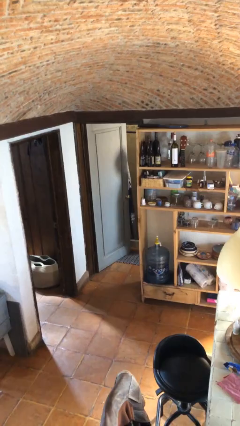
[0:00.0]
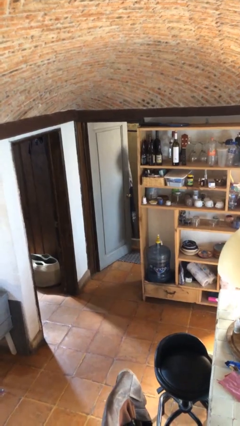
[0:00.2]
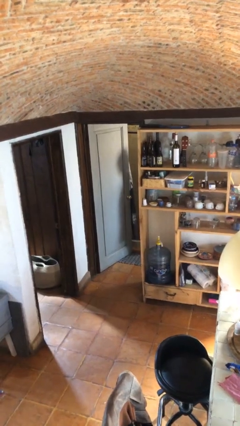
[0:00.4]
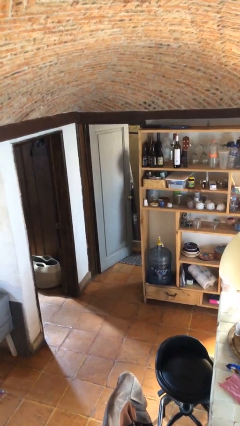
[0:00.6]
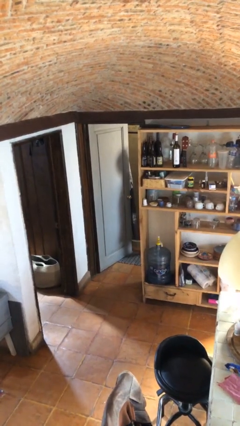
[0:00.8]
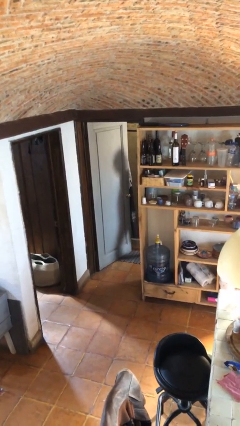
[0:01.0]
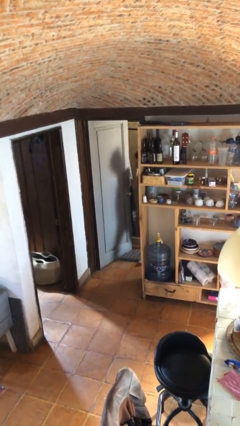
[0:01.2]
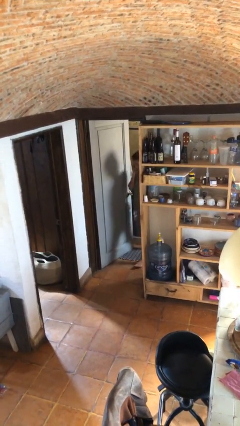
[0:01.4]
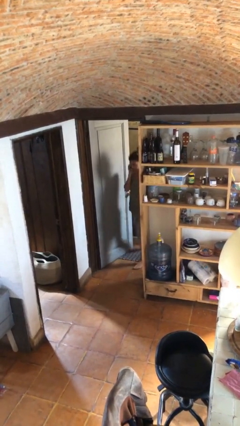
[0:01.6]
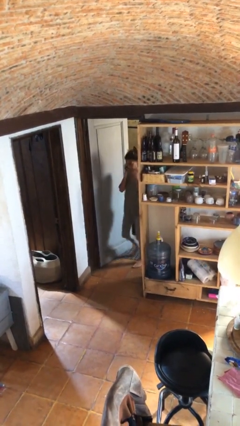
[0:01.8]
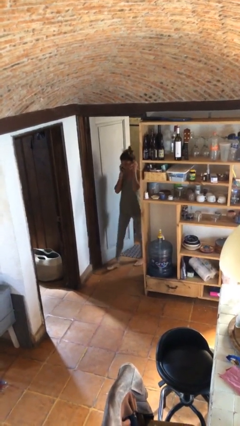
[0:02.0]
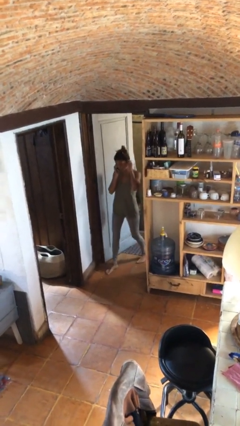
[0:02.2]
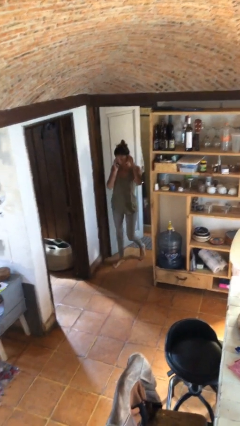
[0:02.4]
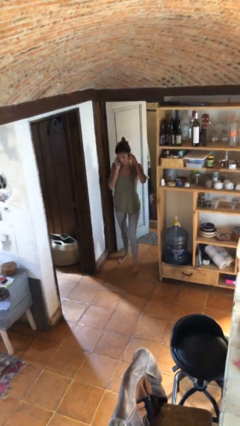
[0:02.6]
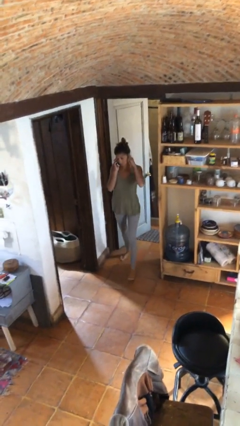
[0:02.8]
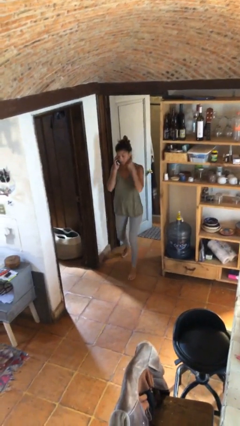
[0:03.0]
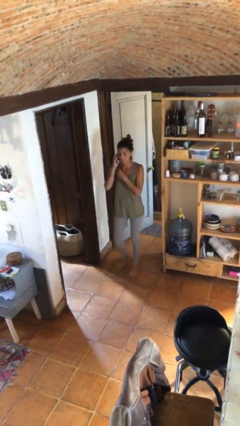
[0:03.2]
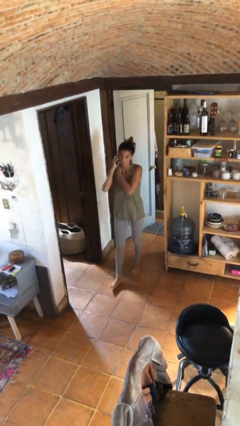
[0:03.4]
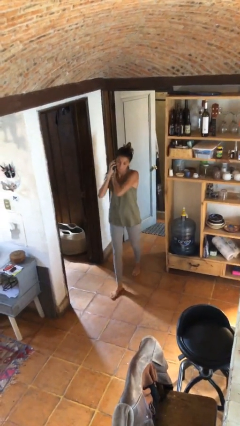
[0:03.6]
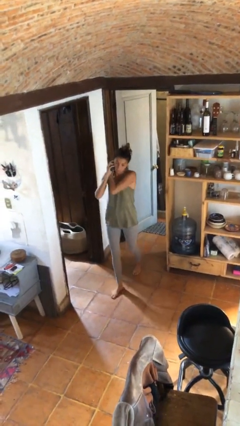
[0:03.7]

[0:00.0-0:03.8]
person enters scene through structure

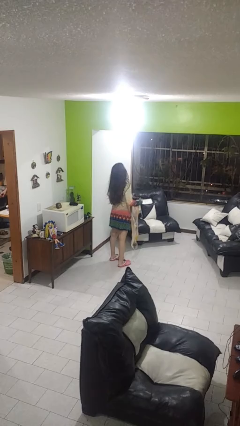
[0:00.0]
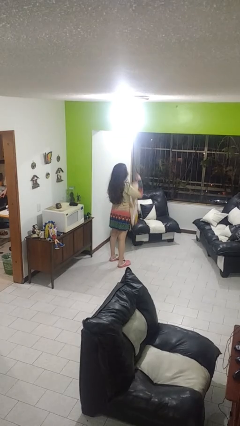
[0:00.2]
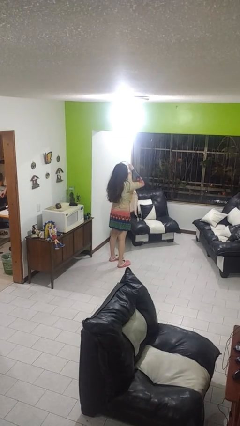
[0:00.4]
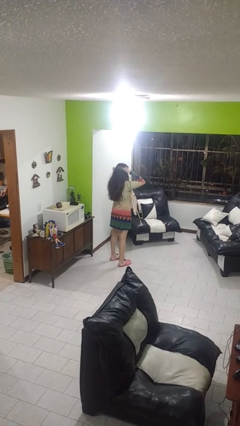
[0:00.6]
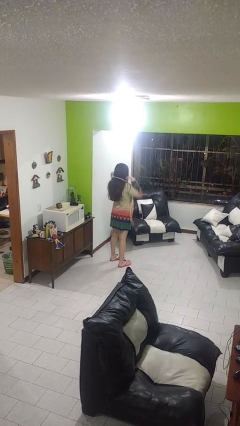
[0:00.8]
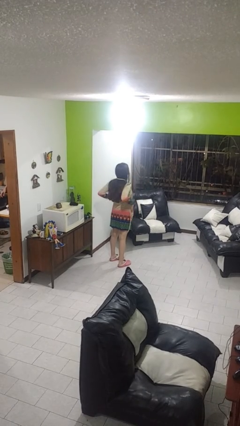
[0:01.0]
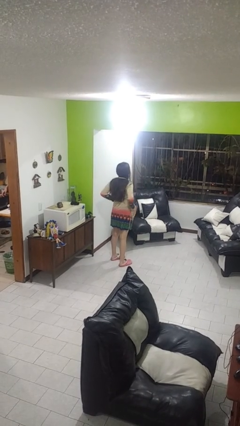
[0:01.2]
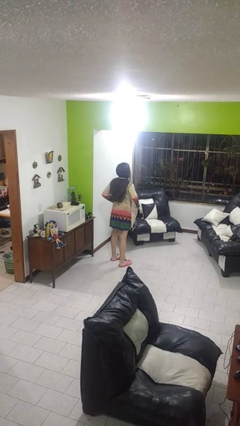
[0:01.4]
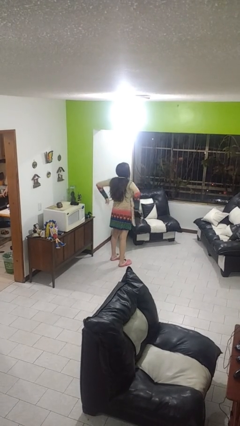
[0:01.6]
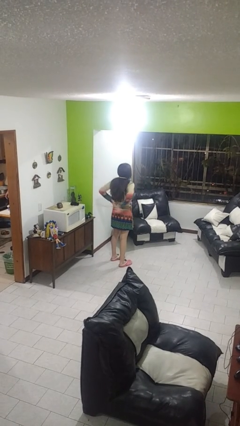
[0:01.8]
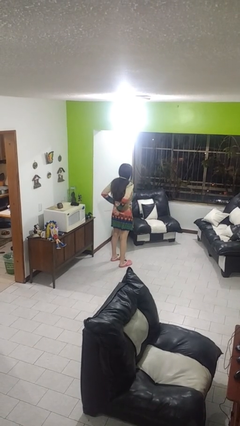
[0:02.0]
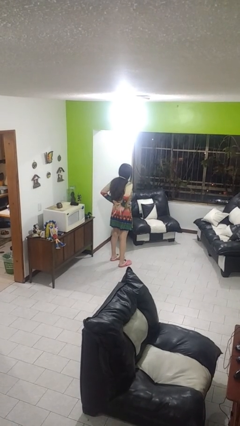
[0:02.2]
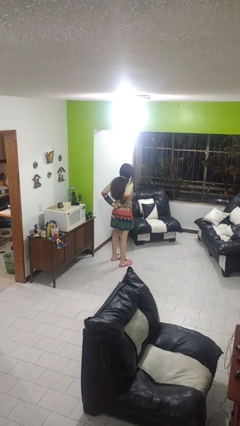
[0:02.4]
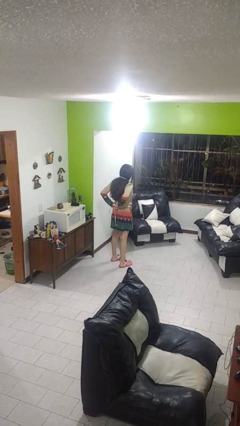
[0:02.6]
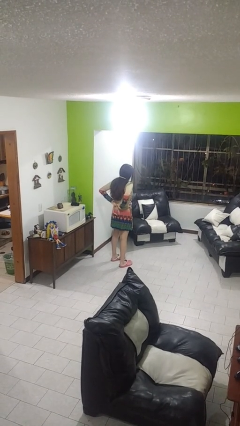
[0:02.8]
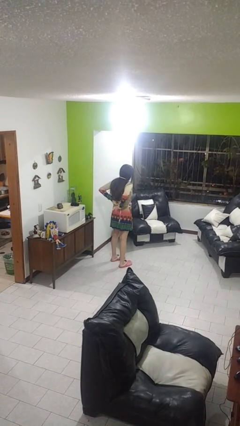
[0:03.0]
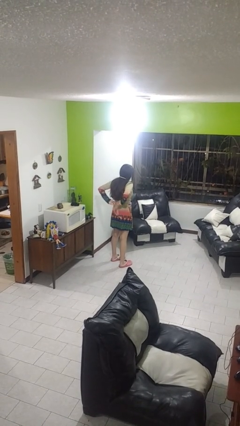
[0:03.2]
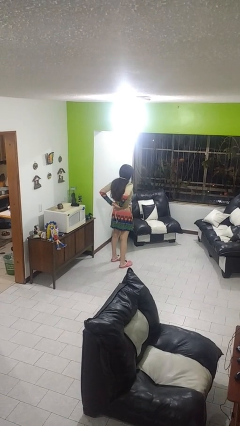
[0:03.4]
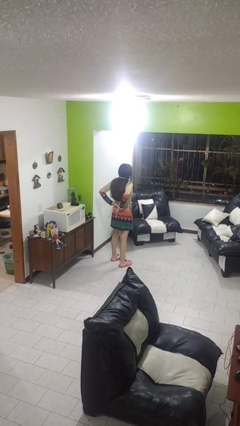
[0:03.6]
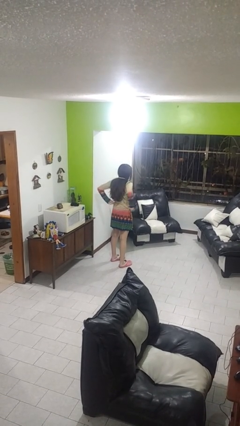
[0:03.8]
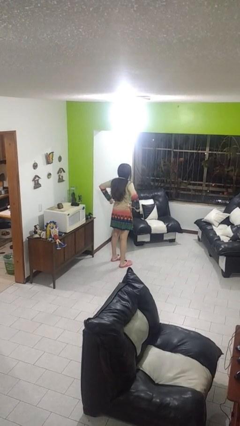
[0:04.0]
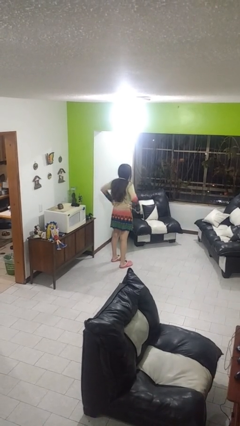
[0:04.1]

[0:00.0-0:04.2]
person puts on apron

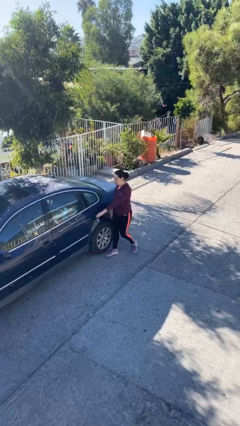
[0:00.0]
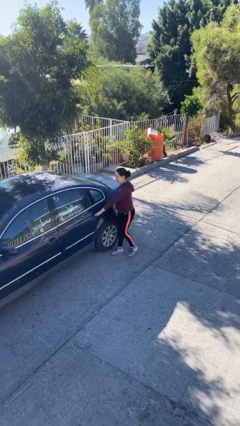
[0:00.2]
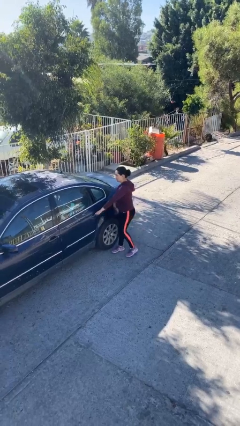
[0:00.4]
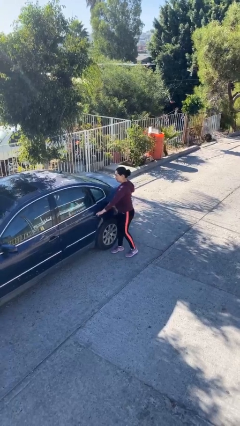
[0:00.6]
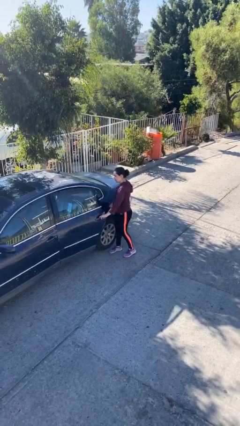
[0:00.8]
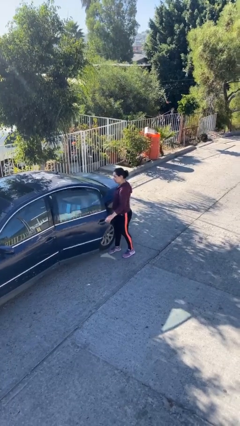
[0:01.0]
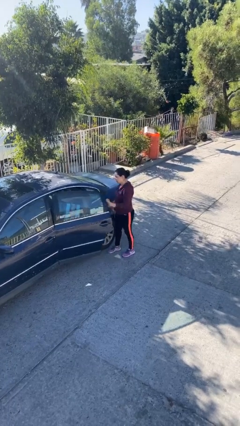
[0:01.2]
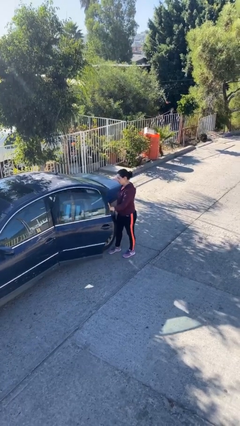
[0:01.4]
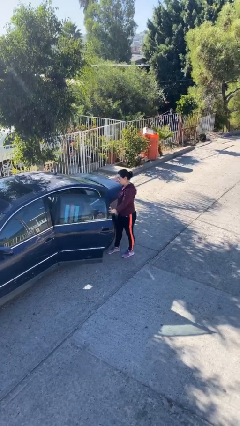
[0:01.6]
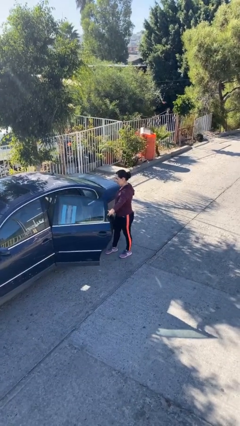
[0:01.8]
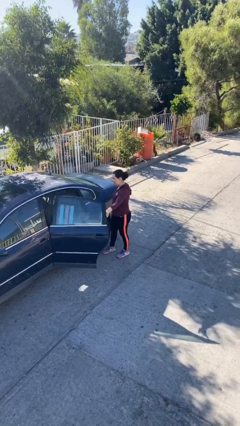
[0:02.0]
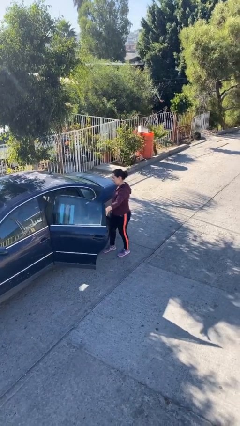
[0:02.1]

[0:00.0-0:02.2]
person opens car door

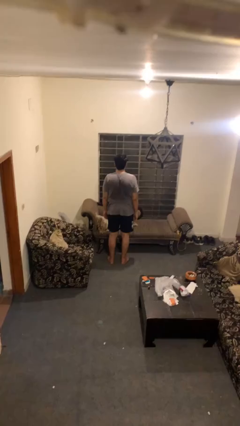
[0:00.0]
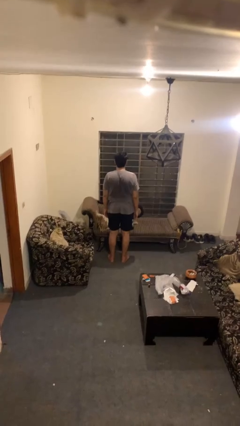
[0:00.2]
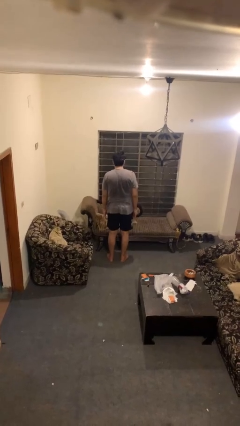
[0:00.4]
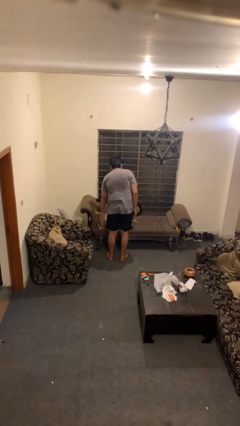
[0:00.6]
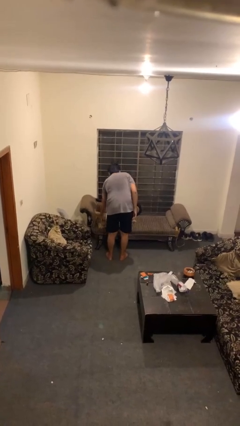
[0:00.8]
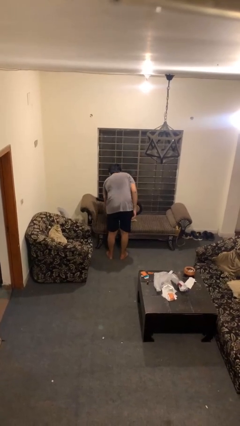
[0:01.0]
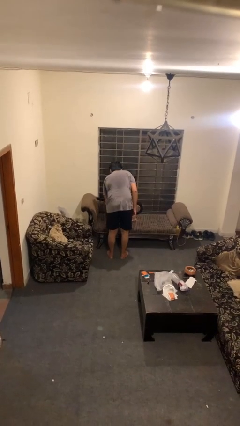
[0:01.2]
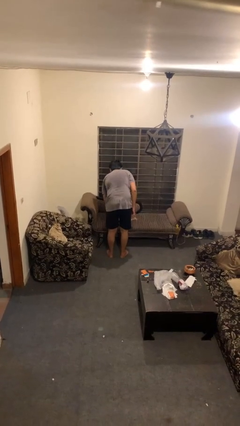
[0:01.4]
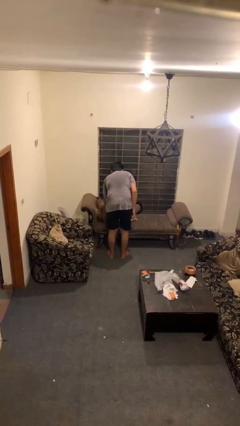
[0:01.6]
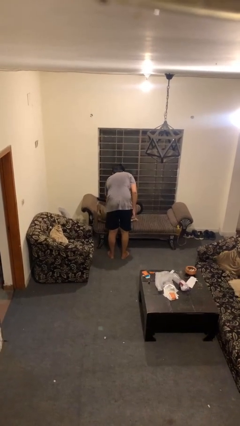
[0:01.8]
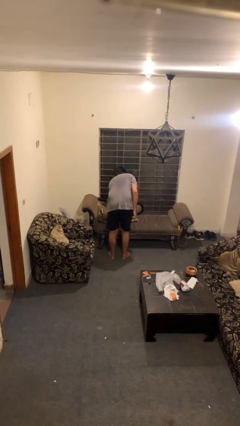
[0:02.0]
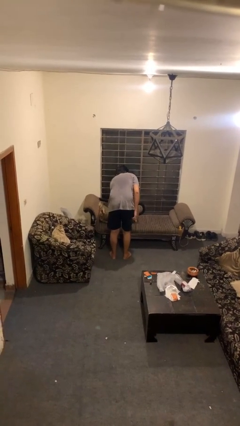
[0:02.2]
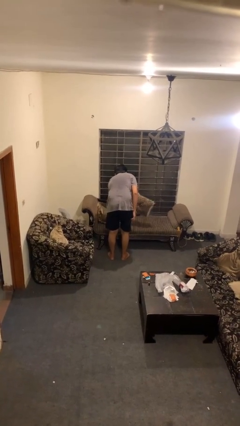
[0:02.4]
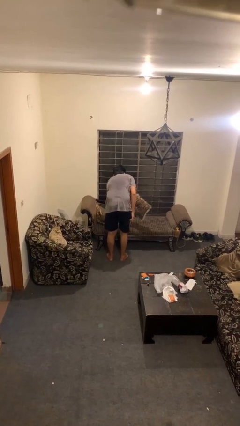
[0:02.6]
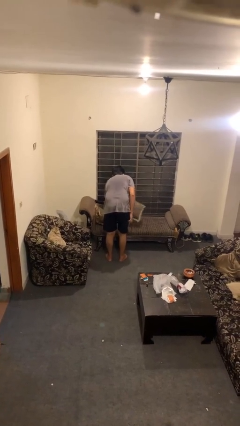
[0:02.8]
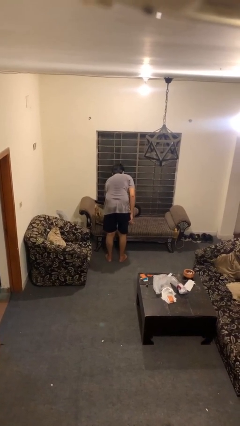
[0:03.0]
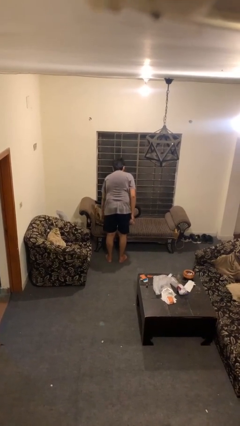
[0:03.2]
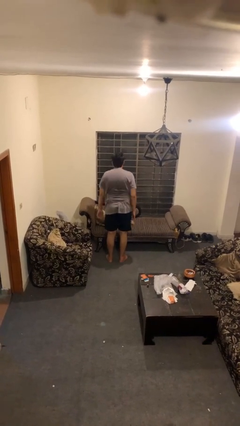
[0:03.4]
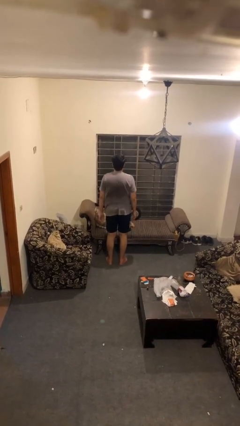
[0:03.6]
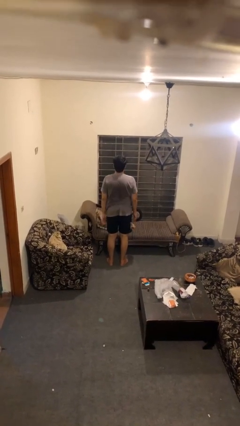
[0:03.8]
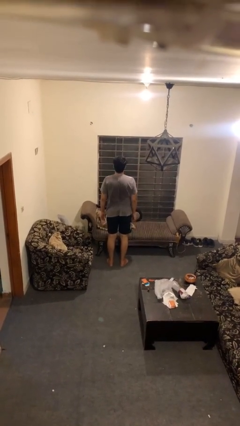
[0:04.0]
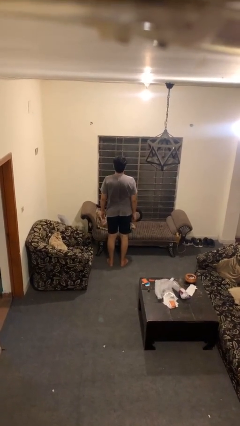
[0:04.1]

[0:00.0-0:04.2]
person searches in couch

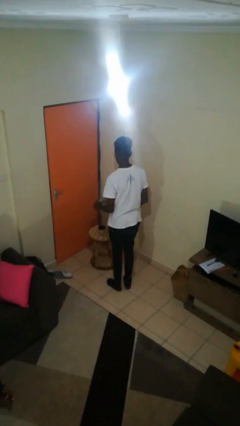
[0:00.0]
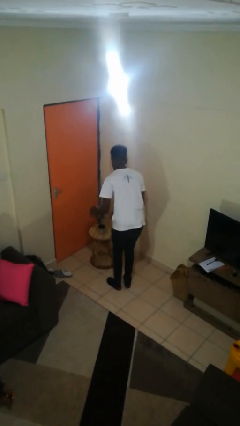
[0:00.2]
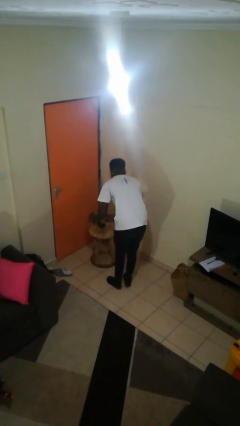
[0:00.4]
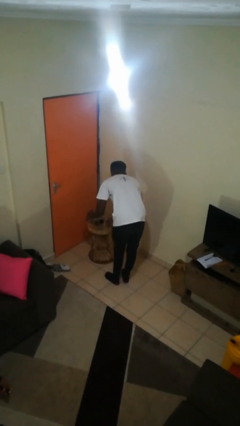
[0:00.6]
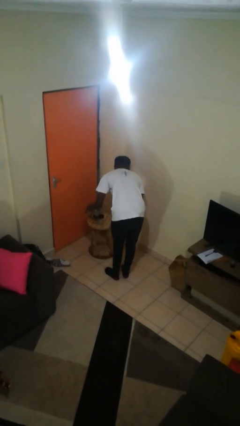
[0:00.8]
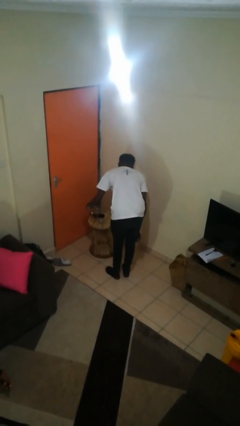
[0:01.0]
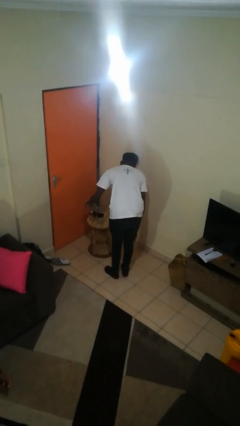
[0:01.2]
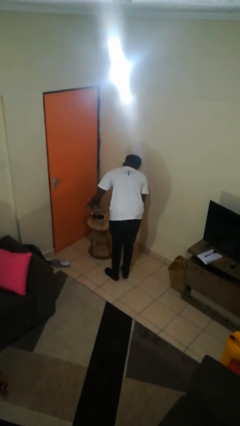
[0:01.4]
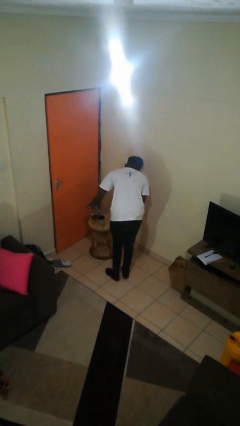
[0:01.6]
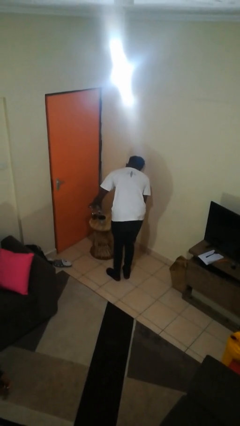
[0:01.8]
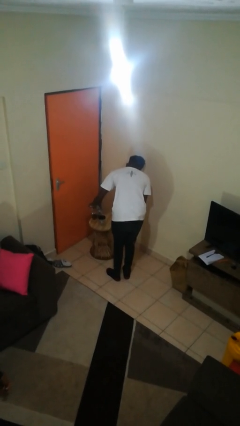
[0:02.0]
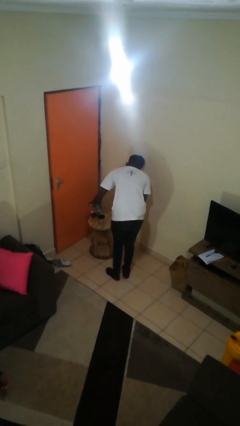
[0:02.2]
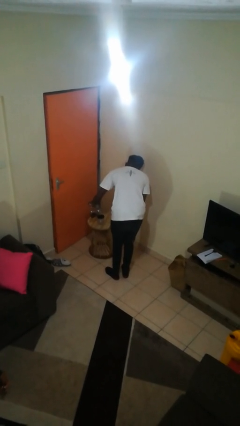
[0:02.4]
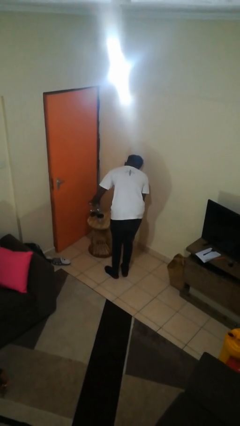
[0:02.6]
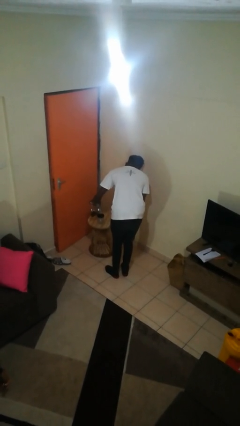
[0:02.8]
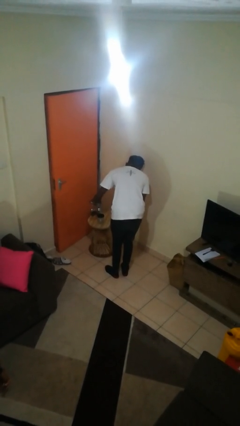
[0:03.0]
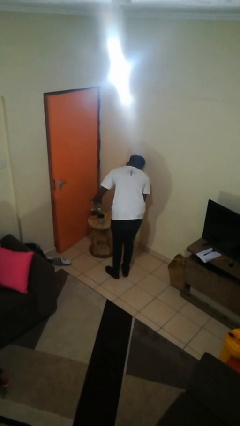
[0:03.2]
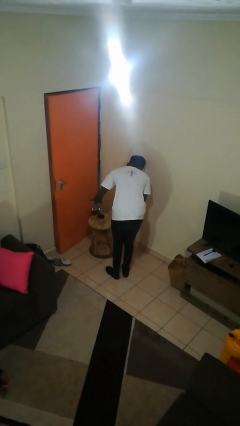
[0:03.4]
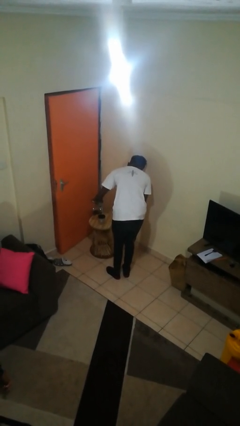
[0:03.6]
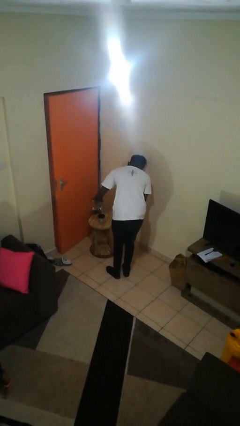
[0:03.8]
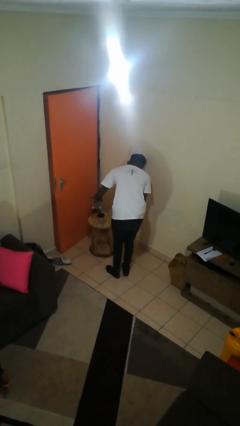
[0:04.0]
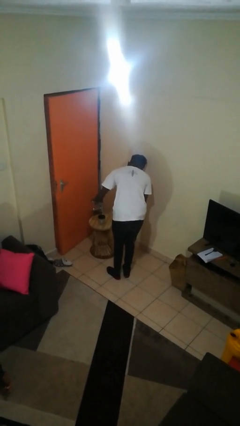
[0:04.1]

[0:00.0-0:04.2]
person pours coffee into mug
